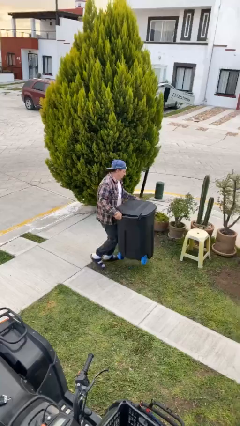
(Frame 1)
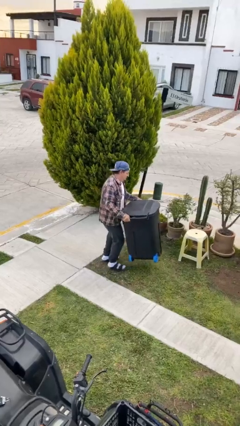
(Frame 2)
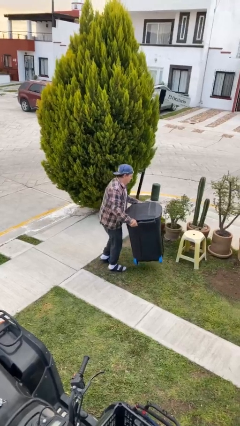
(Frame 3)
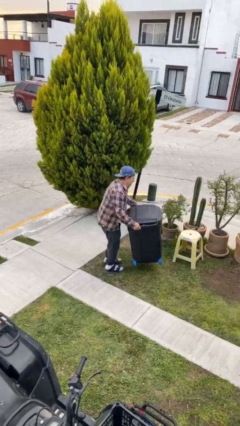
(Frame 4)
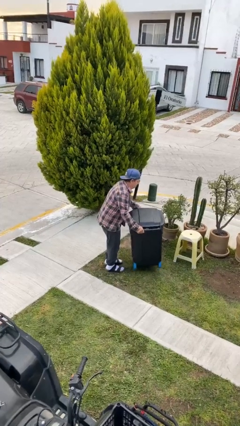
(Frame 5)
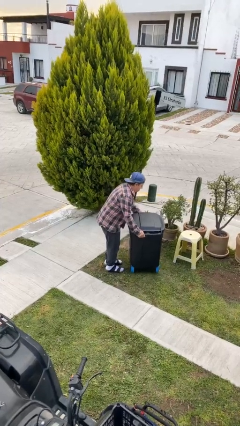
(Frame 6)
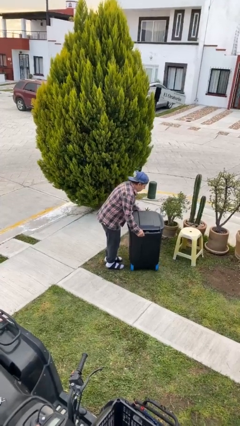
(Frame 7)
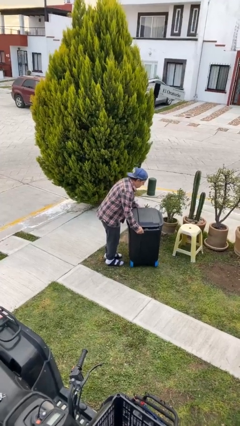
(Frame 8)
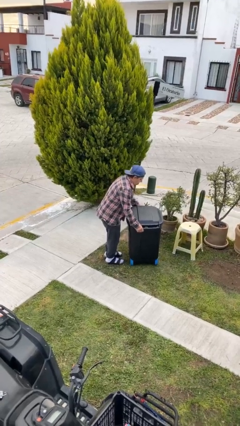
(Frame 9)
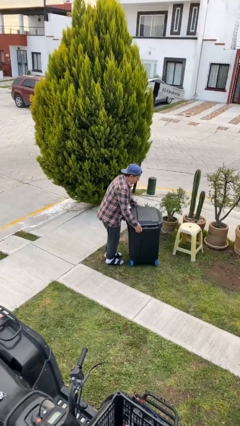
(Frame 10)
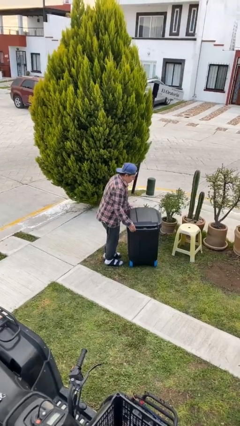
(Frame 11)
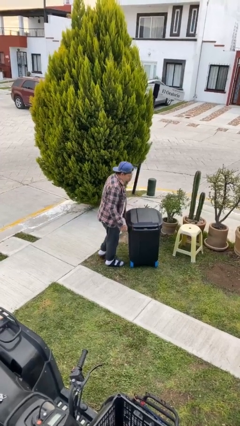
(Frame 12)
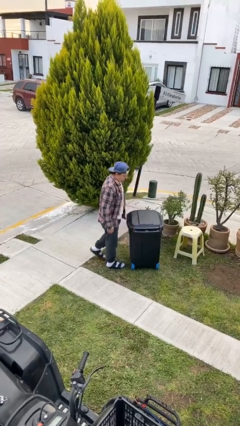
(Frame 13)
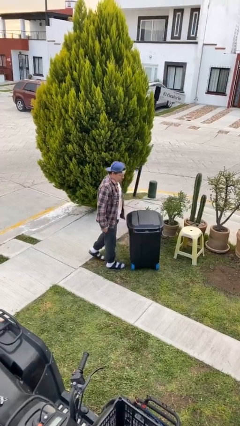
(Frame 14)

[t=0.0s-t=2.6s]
person puts down object on floor

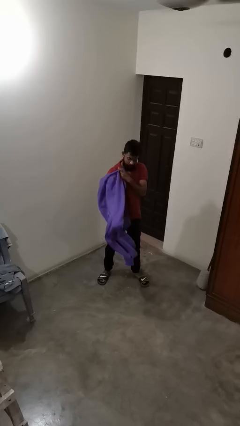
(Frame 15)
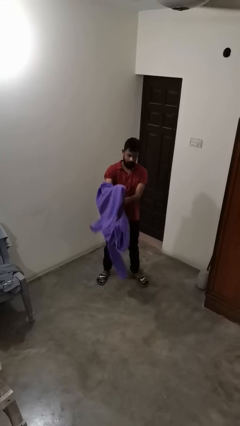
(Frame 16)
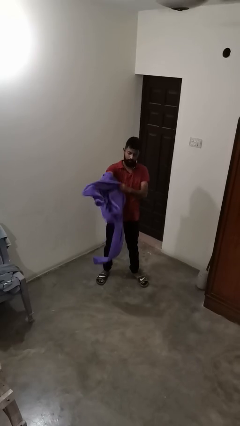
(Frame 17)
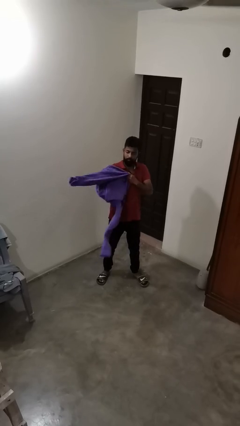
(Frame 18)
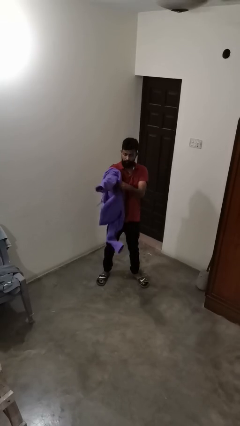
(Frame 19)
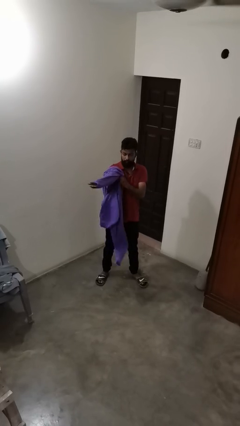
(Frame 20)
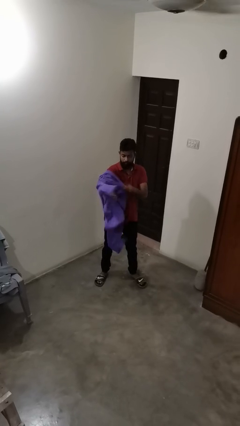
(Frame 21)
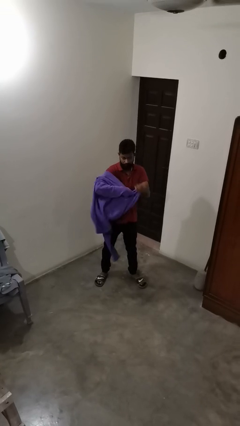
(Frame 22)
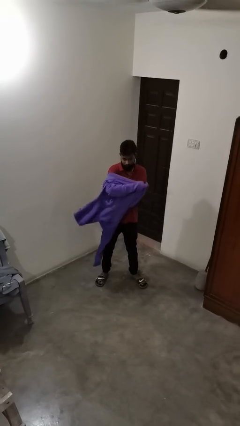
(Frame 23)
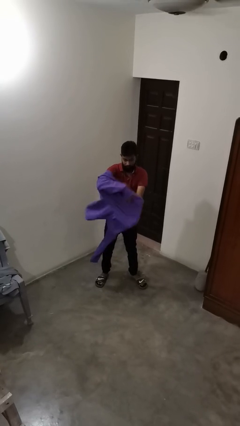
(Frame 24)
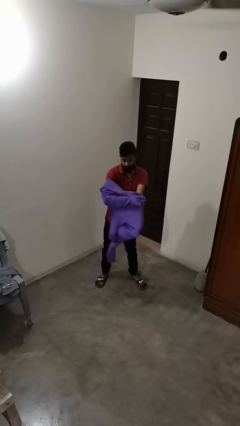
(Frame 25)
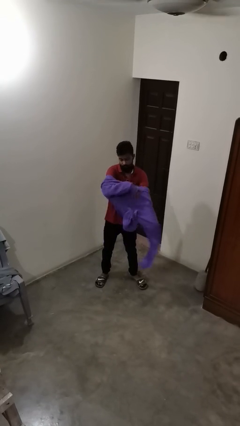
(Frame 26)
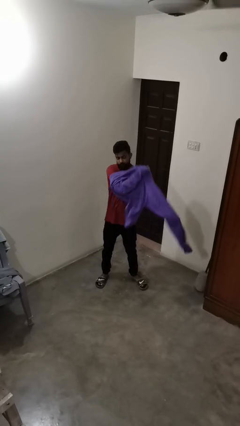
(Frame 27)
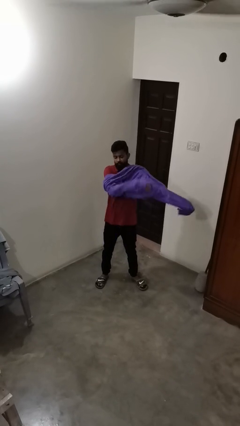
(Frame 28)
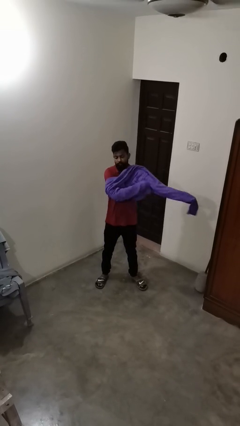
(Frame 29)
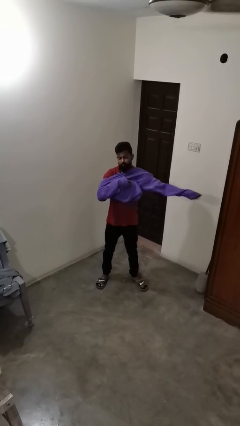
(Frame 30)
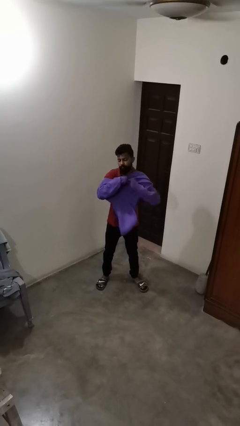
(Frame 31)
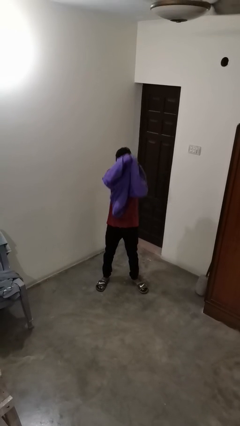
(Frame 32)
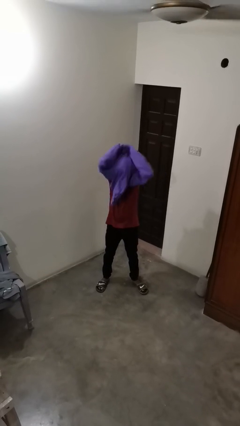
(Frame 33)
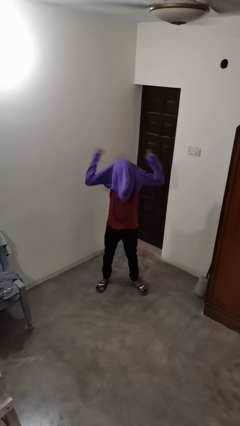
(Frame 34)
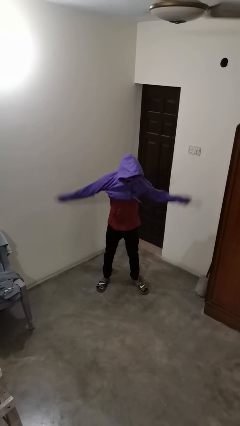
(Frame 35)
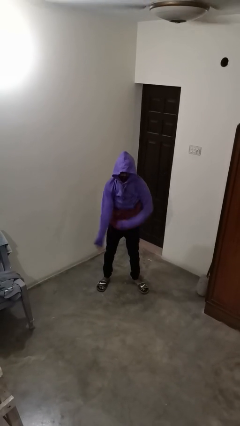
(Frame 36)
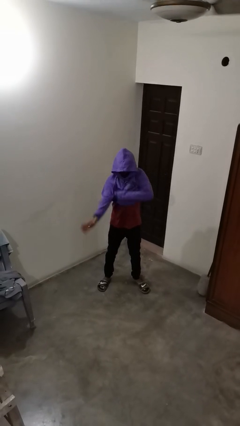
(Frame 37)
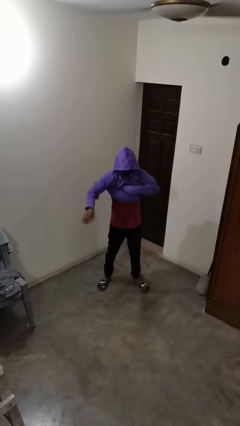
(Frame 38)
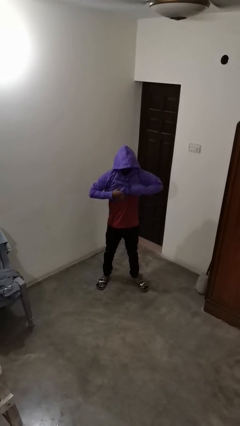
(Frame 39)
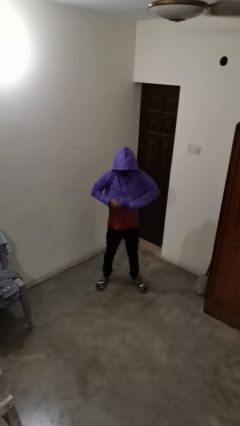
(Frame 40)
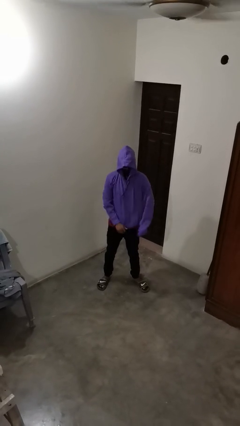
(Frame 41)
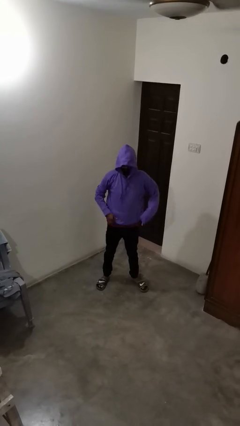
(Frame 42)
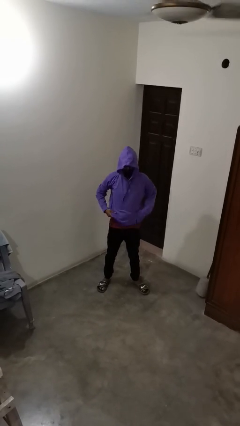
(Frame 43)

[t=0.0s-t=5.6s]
person puts on hoodie

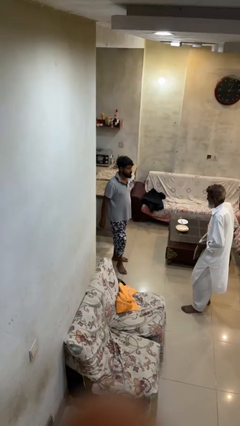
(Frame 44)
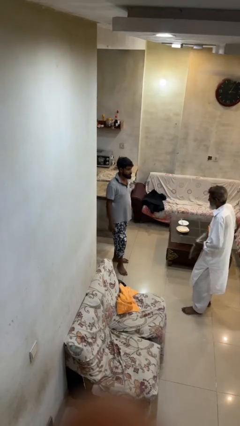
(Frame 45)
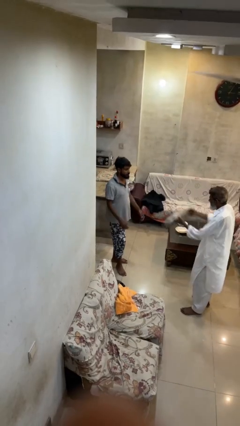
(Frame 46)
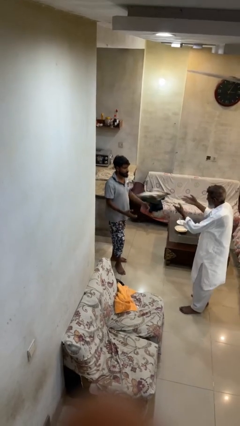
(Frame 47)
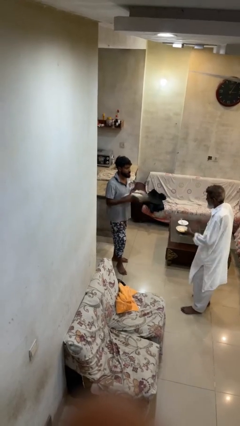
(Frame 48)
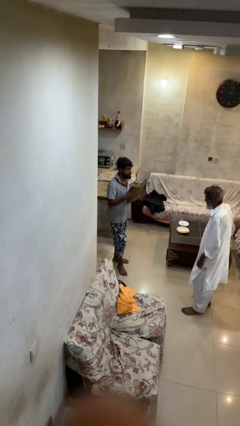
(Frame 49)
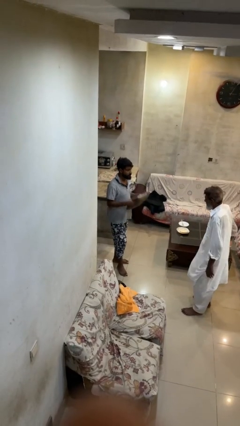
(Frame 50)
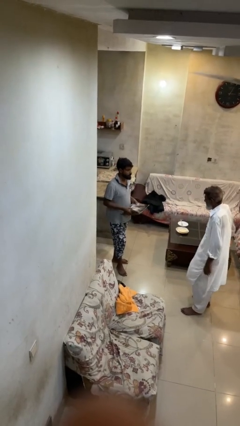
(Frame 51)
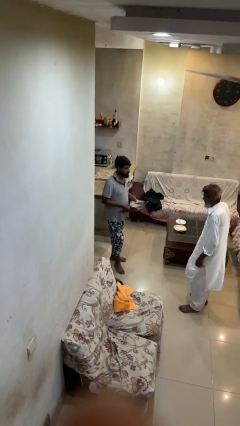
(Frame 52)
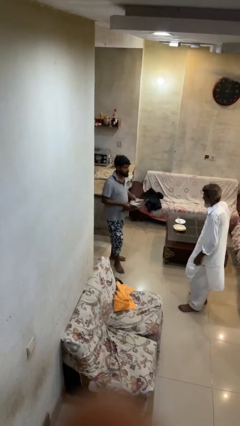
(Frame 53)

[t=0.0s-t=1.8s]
person catches object from person

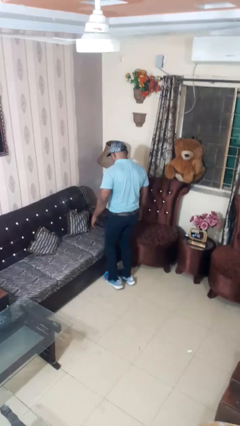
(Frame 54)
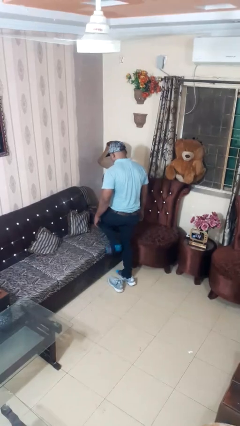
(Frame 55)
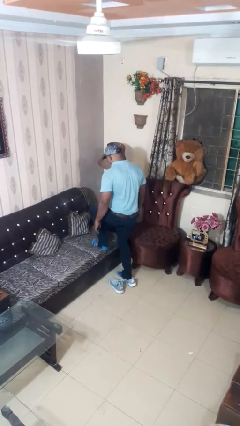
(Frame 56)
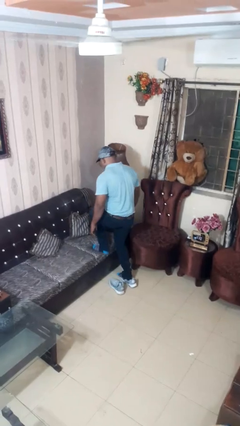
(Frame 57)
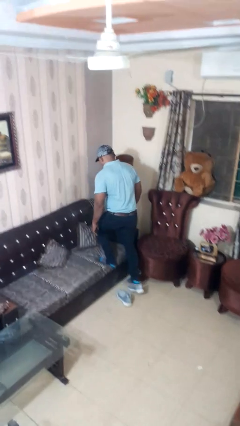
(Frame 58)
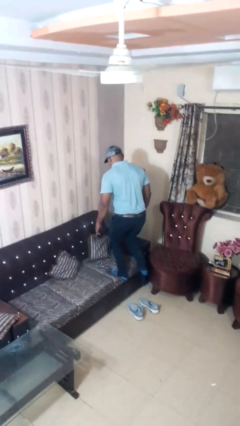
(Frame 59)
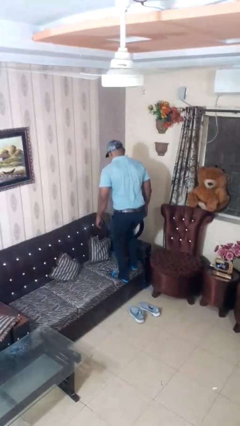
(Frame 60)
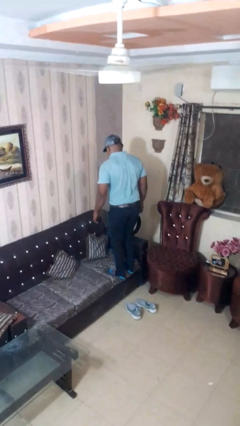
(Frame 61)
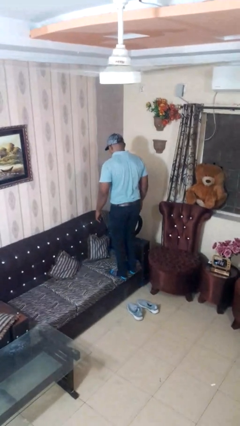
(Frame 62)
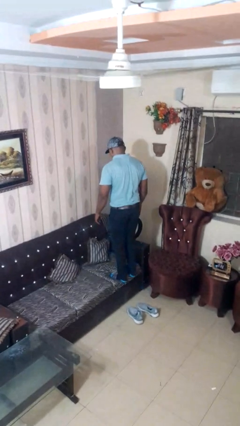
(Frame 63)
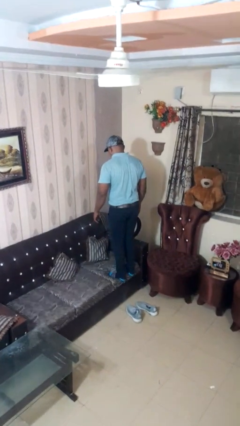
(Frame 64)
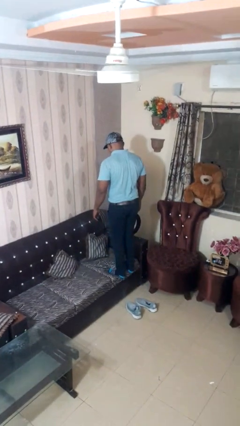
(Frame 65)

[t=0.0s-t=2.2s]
person climbs on couch

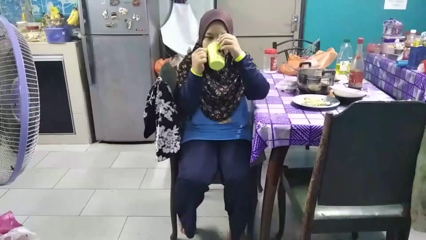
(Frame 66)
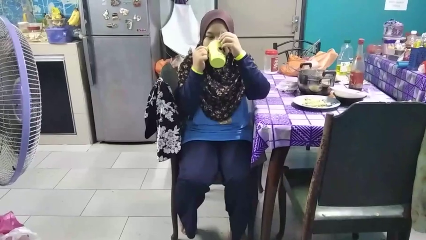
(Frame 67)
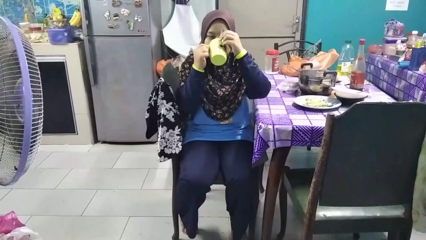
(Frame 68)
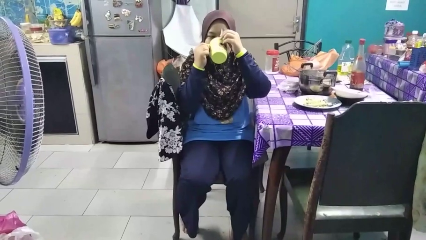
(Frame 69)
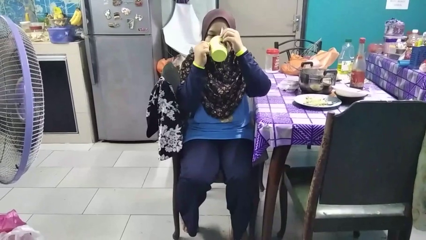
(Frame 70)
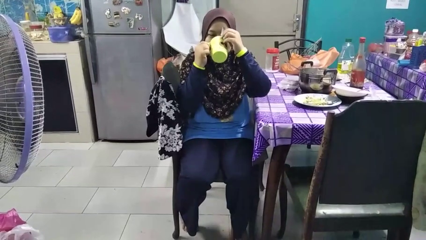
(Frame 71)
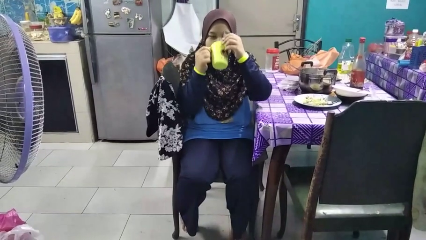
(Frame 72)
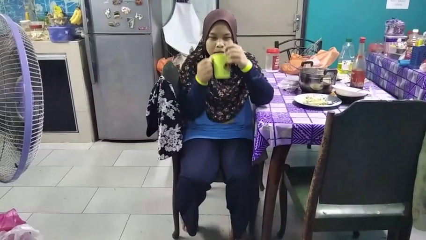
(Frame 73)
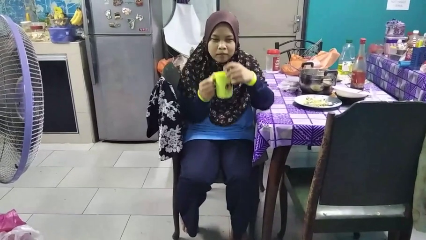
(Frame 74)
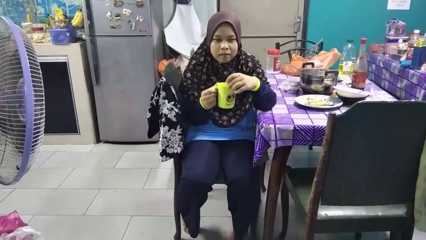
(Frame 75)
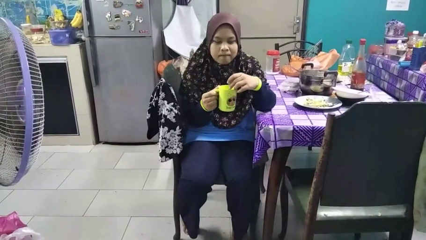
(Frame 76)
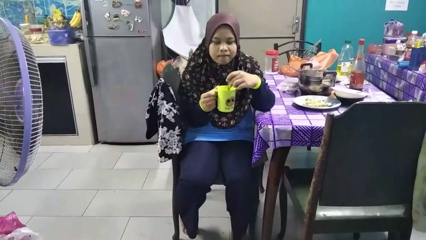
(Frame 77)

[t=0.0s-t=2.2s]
person drinks from mug

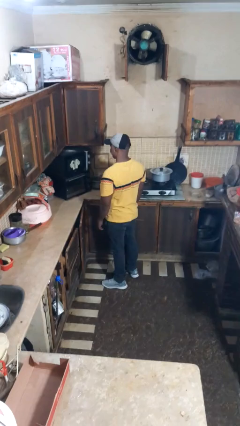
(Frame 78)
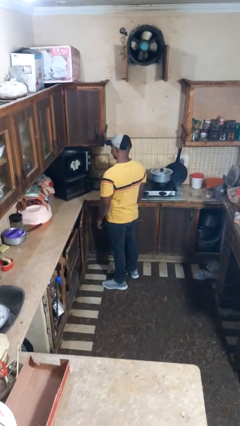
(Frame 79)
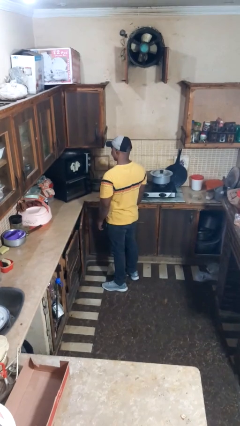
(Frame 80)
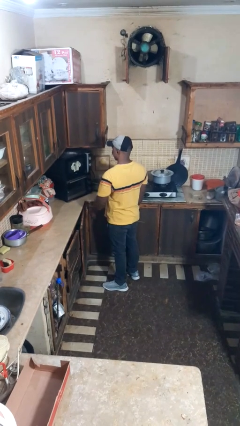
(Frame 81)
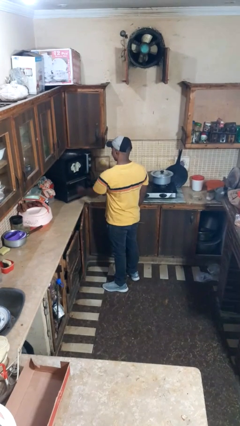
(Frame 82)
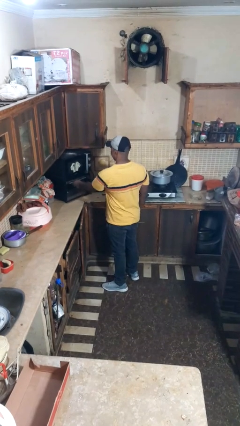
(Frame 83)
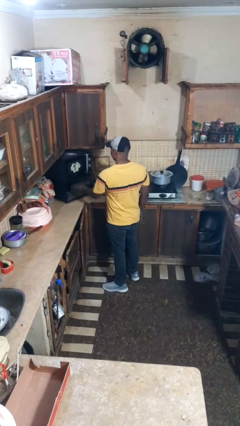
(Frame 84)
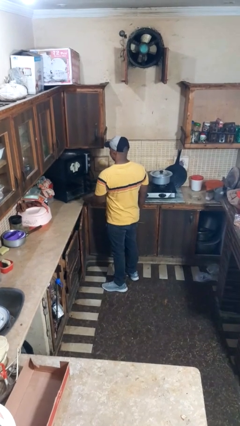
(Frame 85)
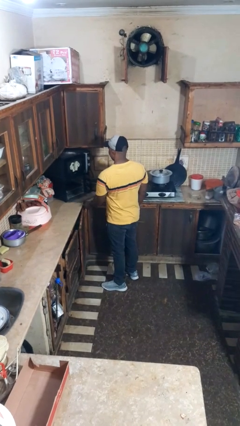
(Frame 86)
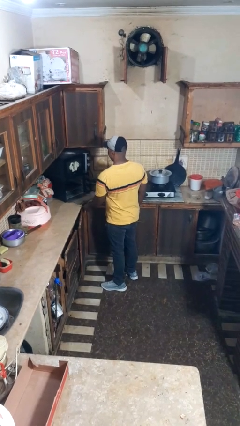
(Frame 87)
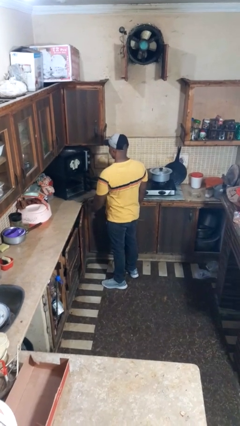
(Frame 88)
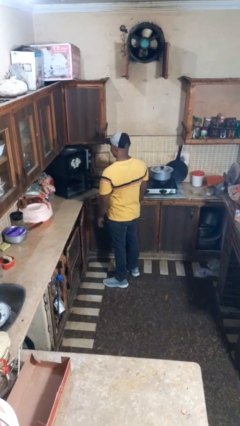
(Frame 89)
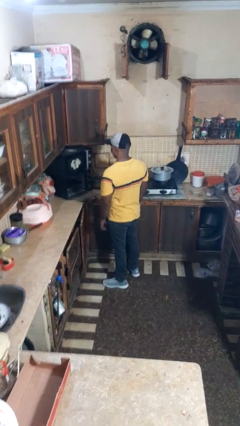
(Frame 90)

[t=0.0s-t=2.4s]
person opens oven door

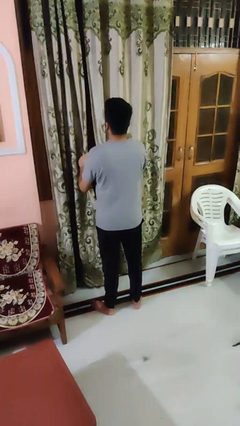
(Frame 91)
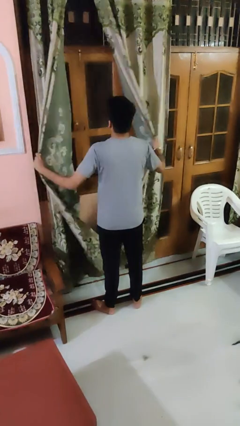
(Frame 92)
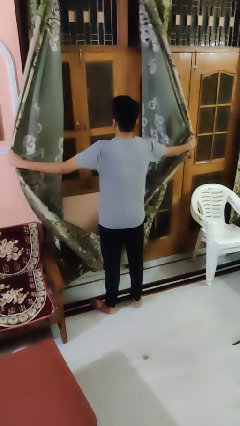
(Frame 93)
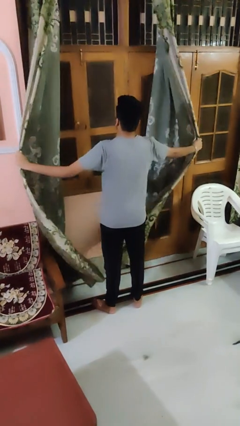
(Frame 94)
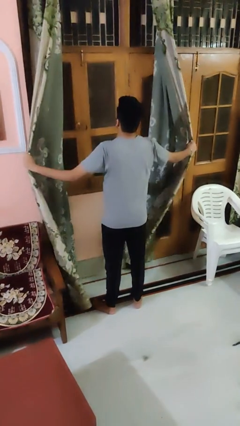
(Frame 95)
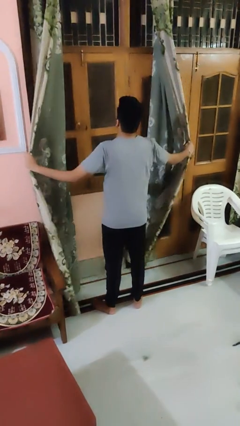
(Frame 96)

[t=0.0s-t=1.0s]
person opens curtains
